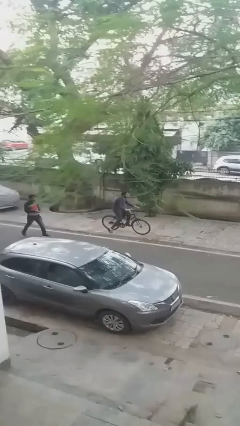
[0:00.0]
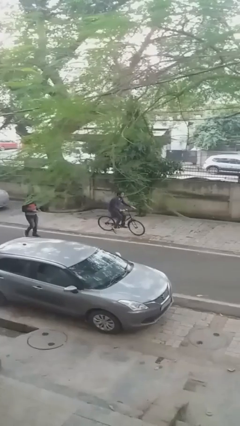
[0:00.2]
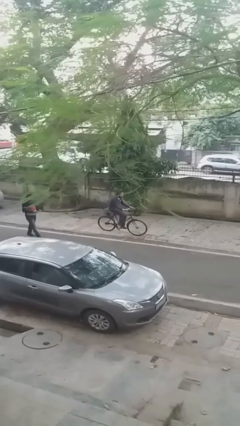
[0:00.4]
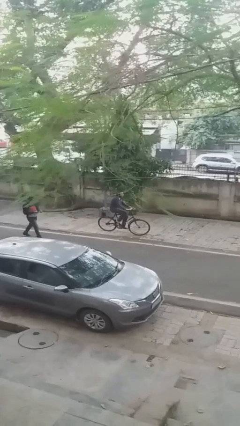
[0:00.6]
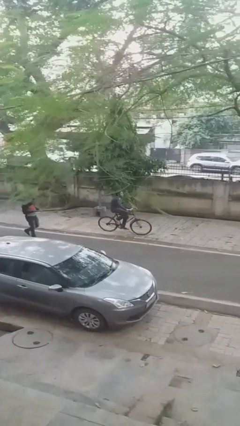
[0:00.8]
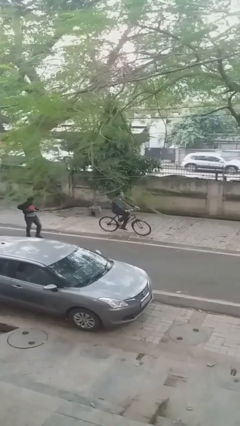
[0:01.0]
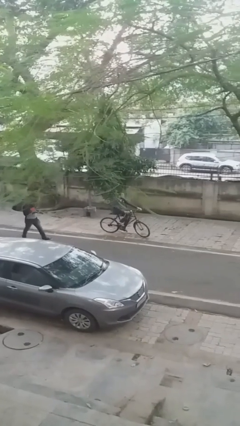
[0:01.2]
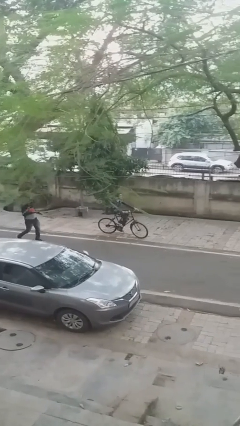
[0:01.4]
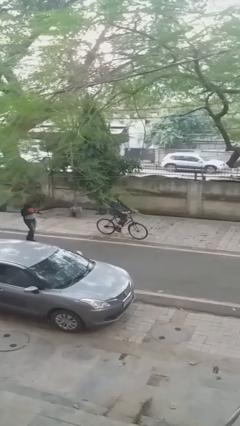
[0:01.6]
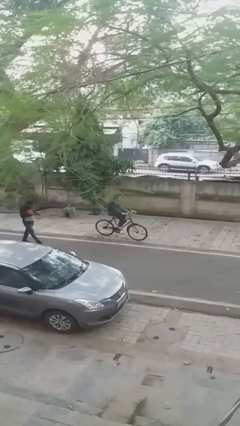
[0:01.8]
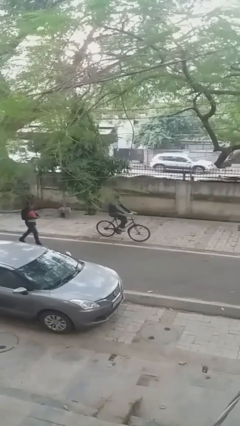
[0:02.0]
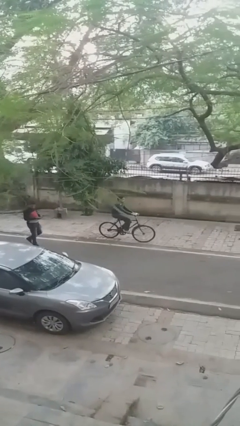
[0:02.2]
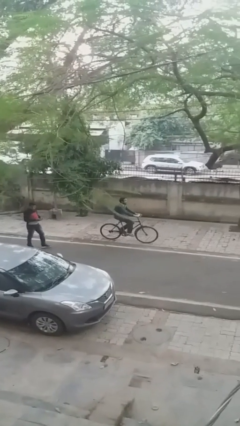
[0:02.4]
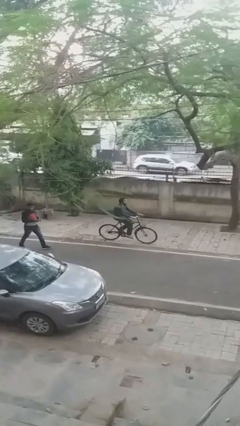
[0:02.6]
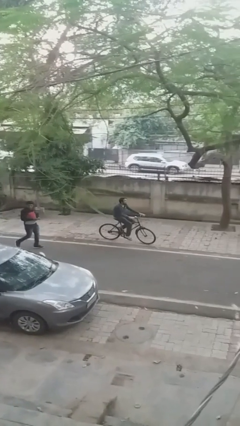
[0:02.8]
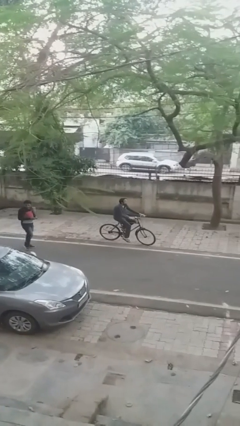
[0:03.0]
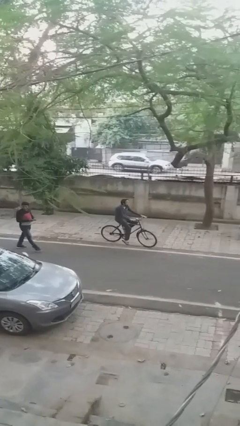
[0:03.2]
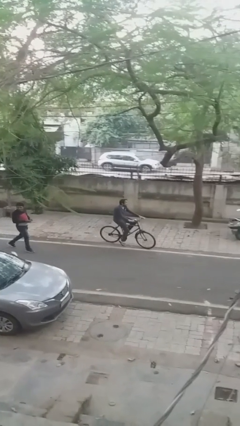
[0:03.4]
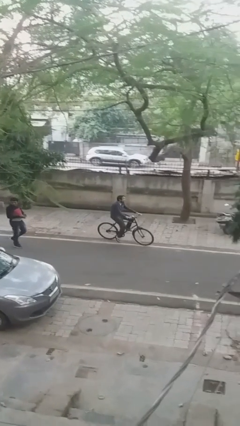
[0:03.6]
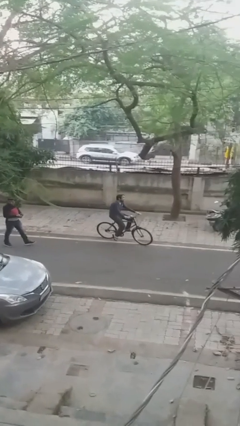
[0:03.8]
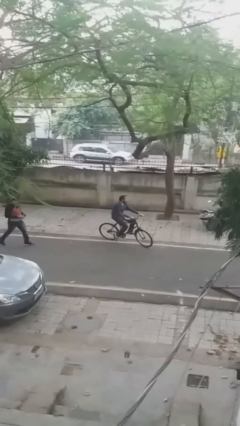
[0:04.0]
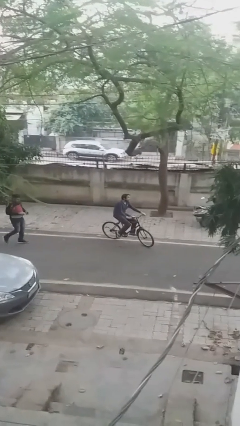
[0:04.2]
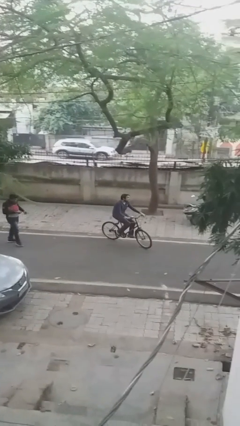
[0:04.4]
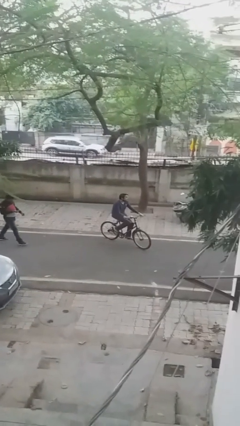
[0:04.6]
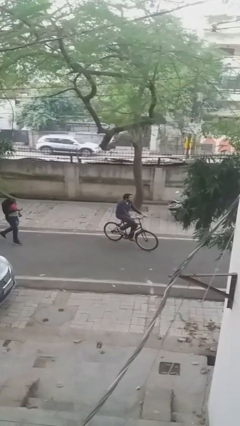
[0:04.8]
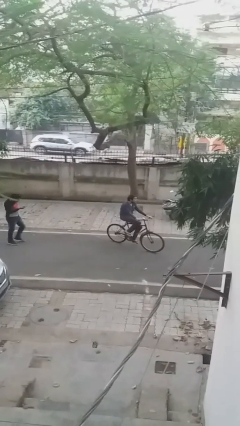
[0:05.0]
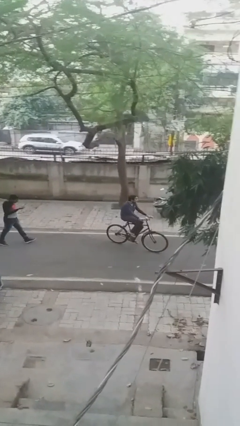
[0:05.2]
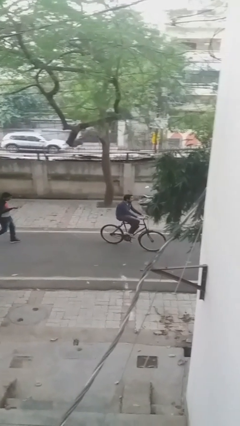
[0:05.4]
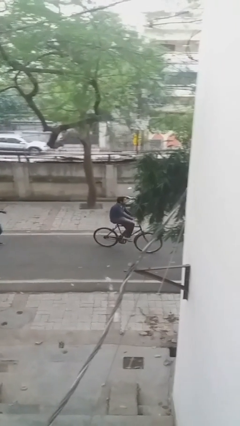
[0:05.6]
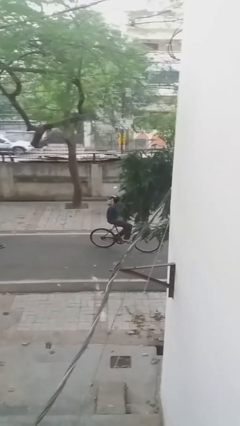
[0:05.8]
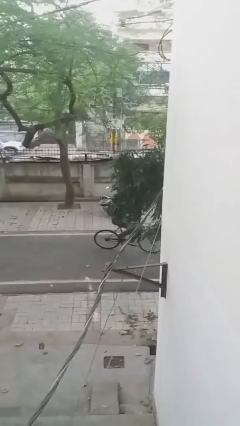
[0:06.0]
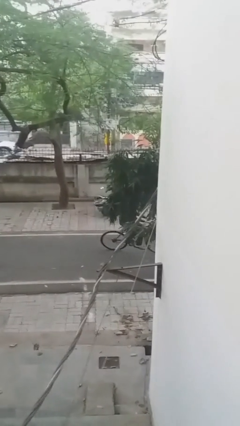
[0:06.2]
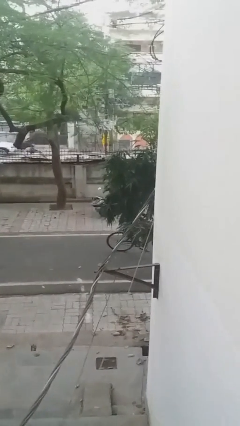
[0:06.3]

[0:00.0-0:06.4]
person rides bicycle

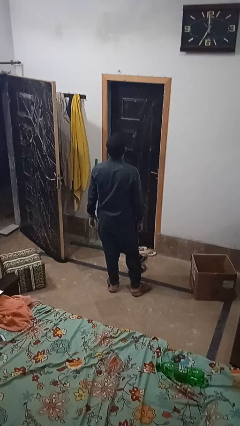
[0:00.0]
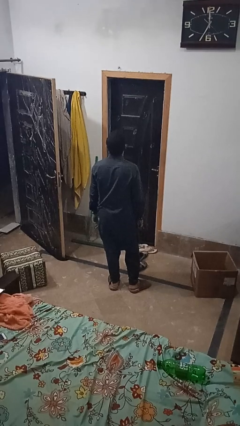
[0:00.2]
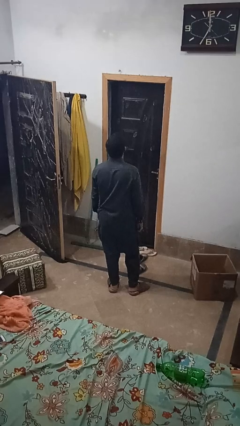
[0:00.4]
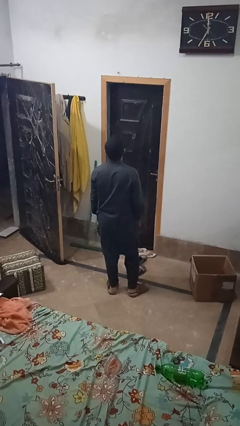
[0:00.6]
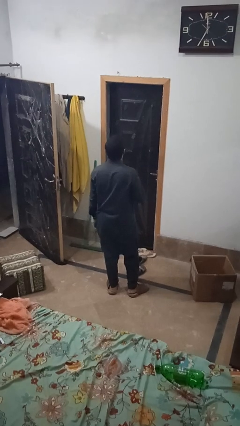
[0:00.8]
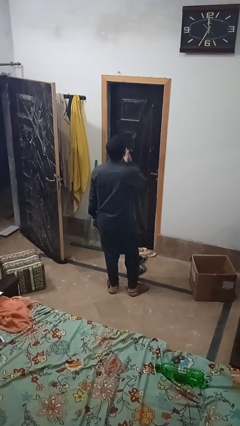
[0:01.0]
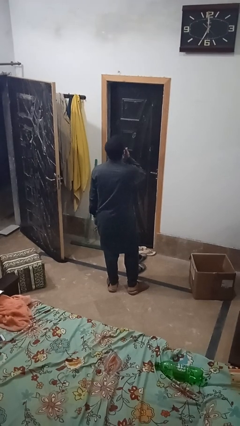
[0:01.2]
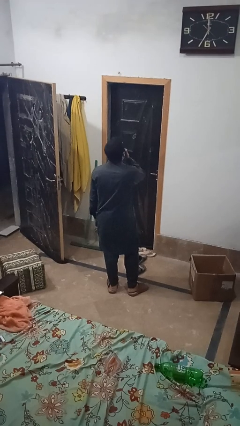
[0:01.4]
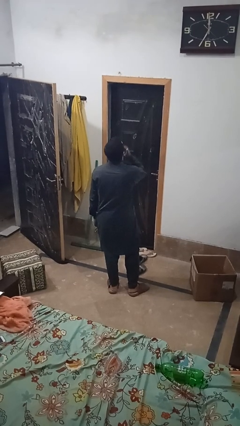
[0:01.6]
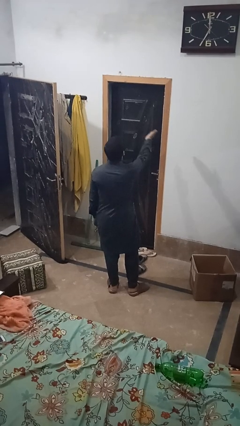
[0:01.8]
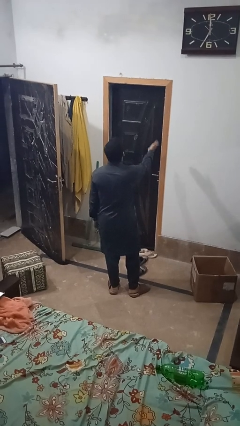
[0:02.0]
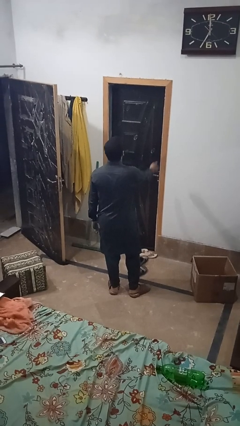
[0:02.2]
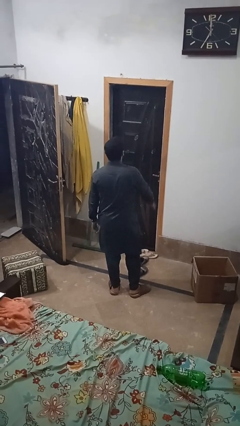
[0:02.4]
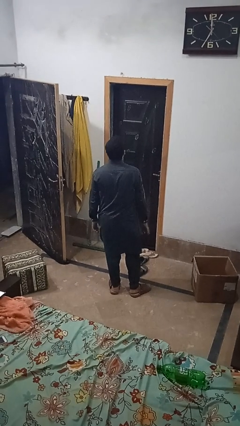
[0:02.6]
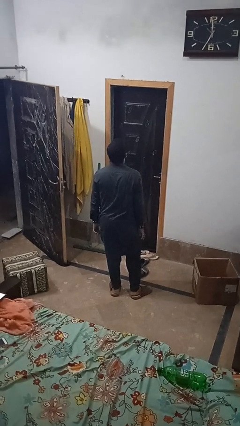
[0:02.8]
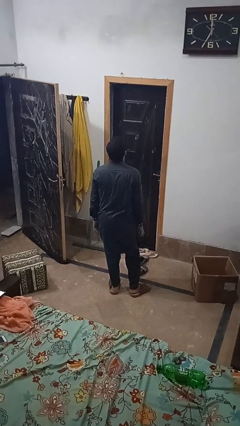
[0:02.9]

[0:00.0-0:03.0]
person gestures blow kiss

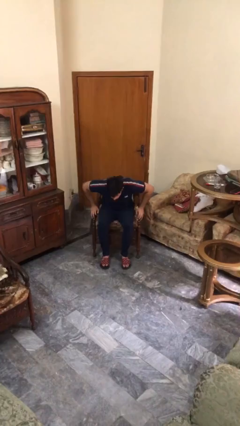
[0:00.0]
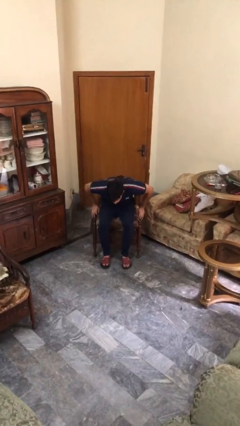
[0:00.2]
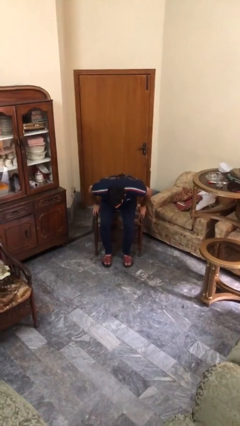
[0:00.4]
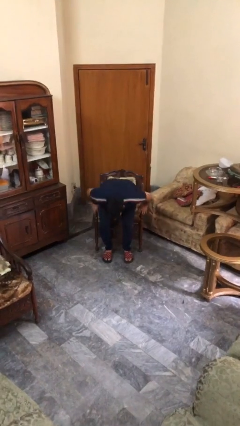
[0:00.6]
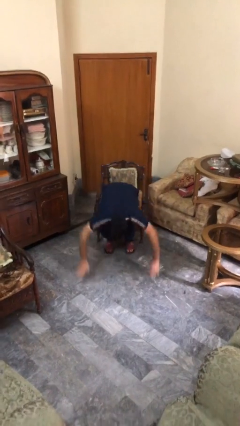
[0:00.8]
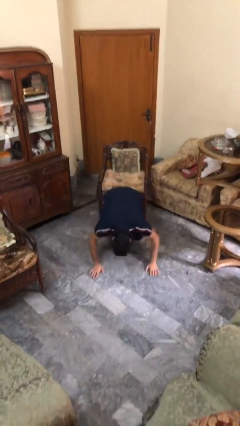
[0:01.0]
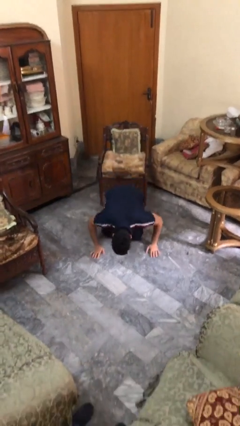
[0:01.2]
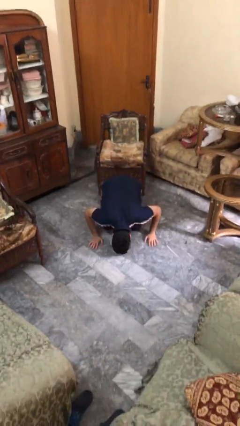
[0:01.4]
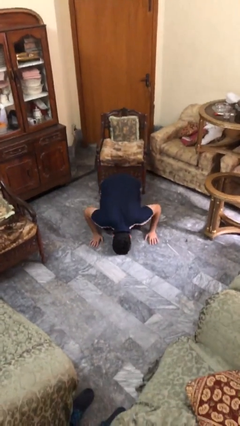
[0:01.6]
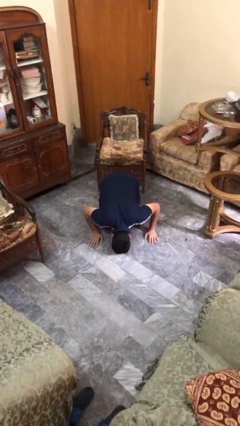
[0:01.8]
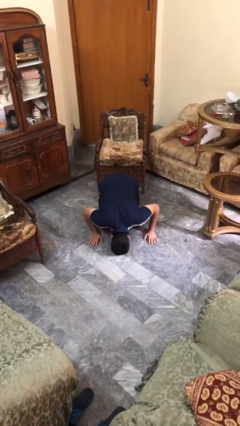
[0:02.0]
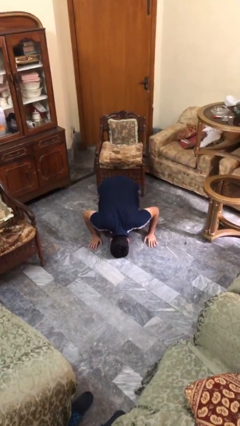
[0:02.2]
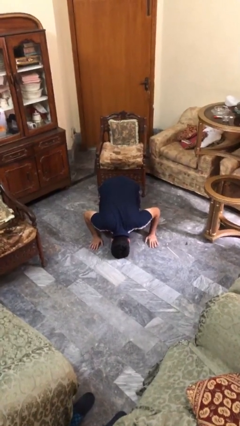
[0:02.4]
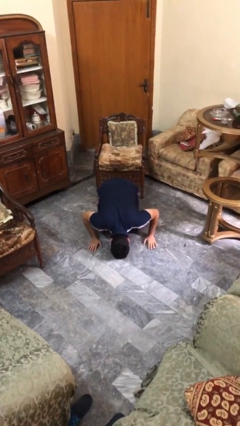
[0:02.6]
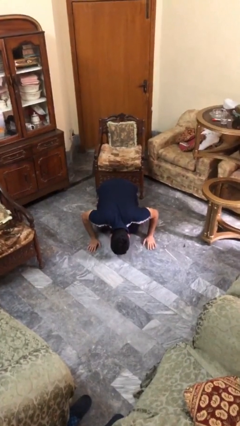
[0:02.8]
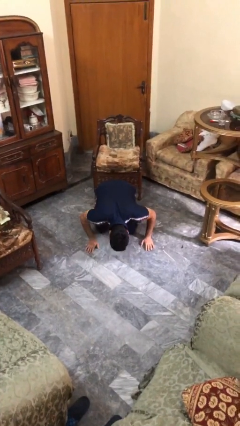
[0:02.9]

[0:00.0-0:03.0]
person falls from chair

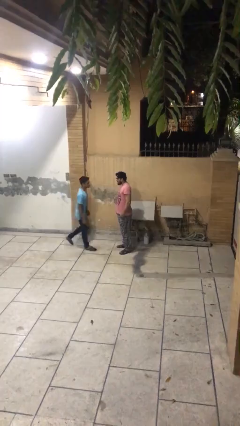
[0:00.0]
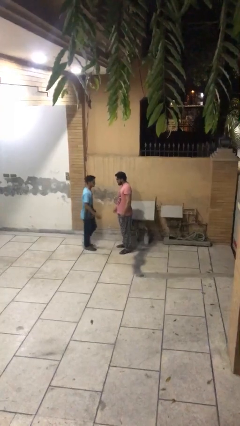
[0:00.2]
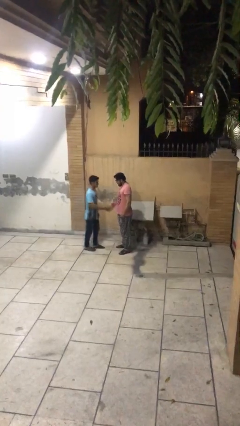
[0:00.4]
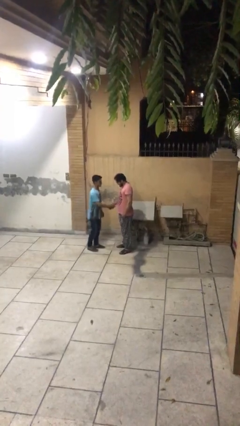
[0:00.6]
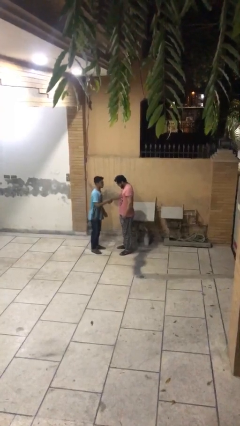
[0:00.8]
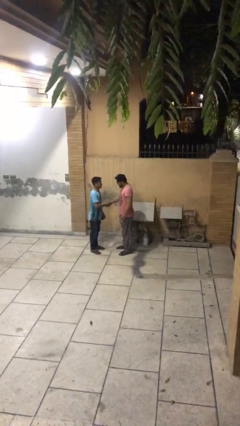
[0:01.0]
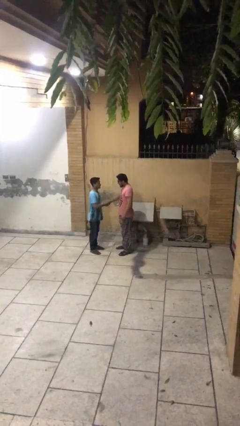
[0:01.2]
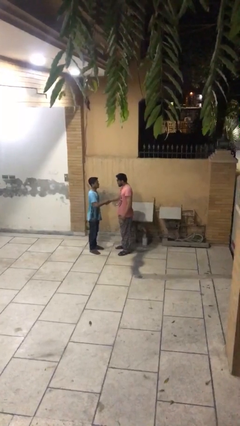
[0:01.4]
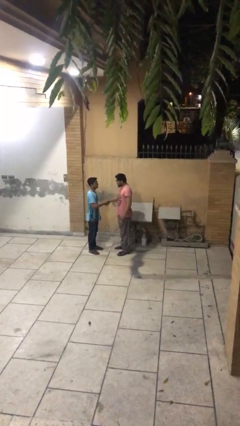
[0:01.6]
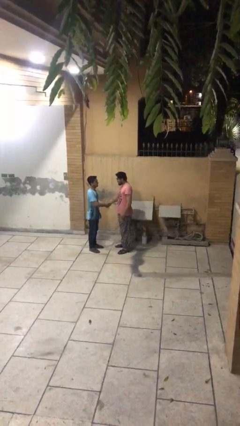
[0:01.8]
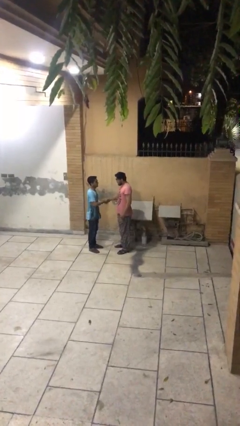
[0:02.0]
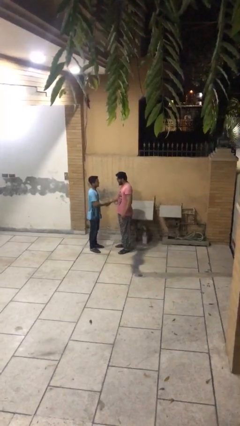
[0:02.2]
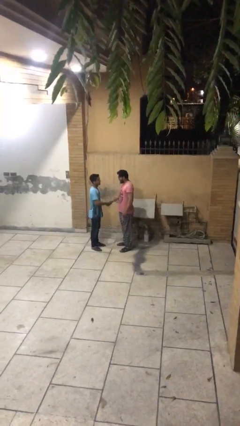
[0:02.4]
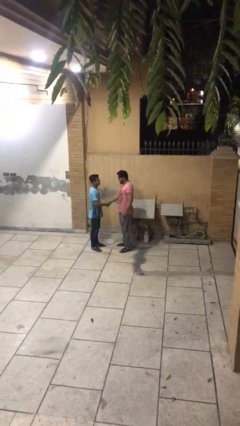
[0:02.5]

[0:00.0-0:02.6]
person shakes hand

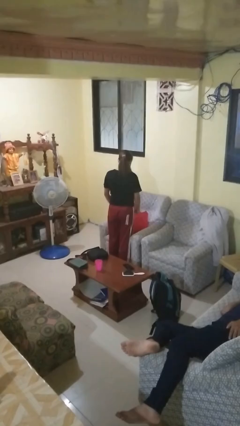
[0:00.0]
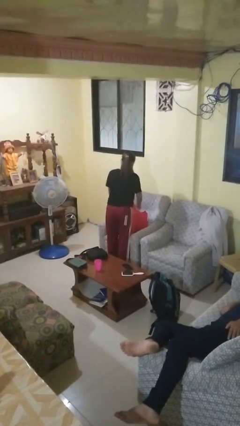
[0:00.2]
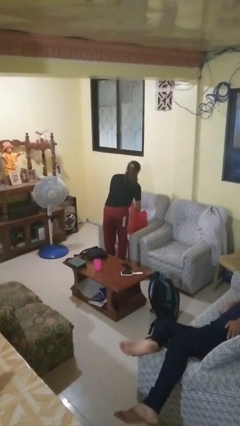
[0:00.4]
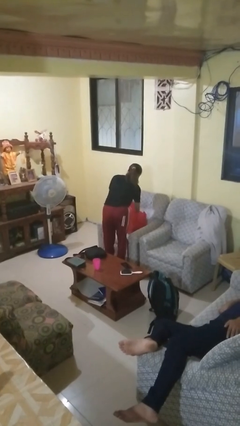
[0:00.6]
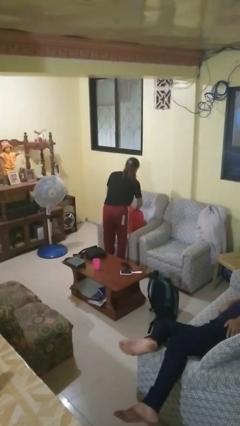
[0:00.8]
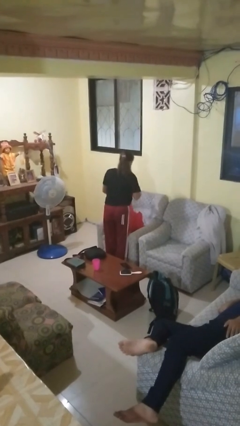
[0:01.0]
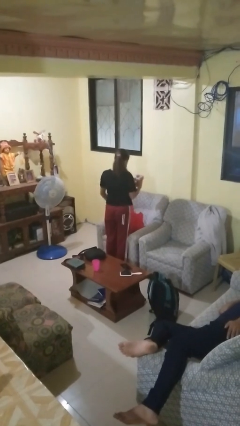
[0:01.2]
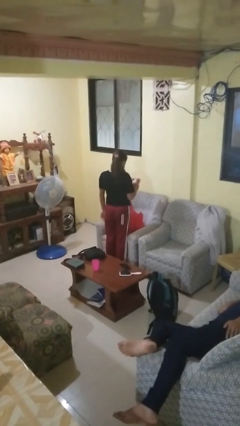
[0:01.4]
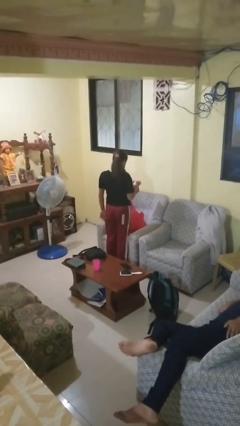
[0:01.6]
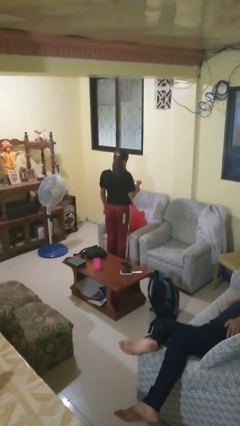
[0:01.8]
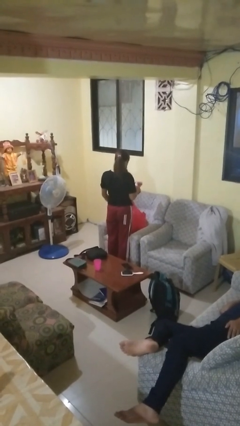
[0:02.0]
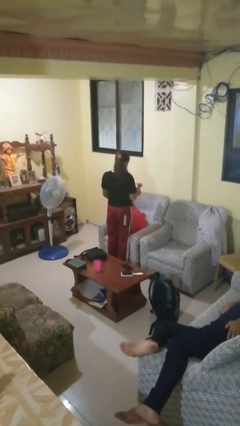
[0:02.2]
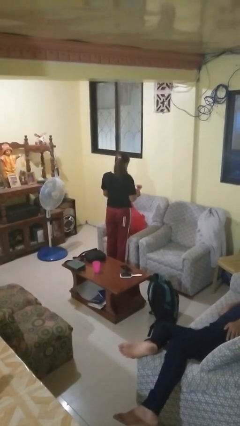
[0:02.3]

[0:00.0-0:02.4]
person takes object from bag

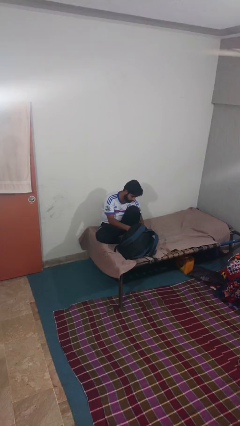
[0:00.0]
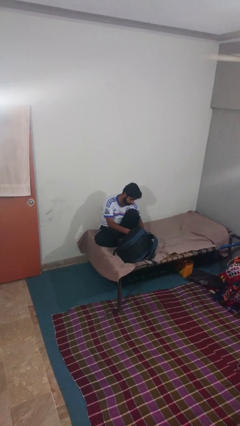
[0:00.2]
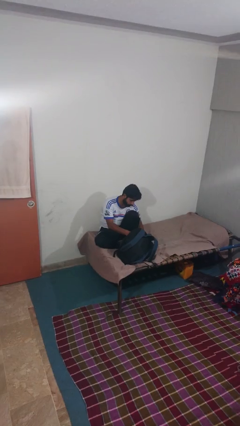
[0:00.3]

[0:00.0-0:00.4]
person puts object into backpack
